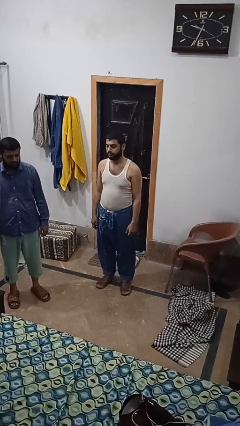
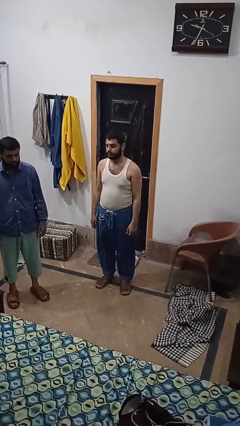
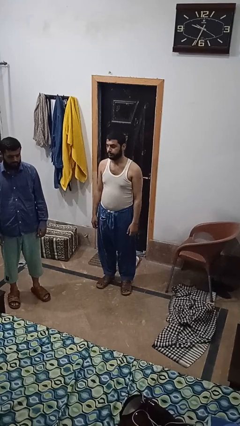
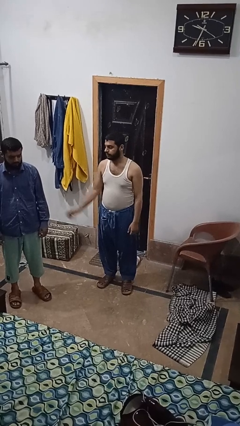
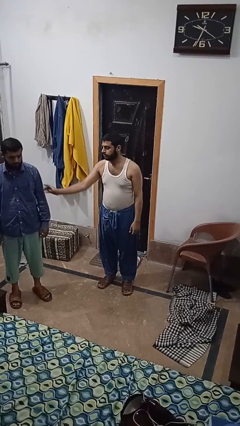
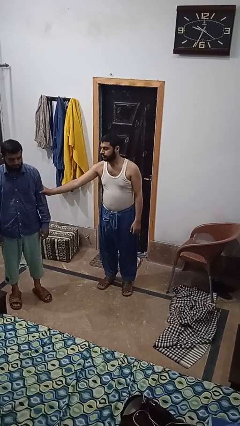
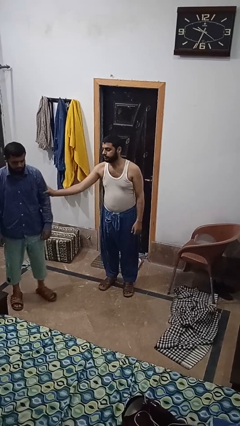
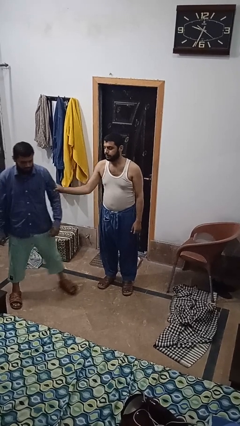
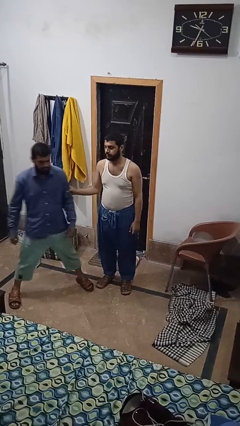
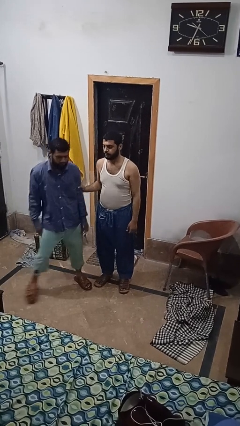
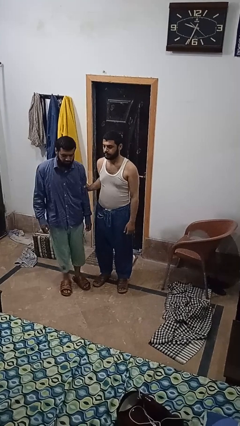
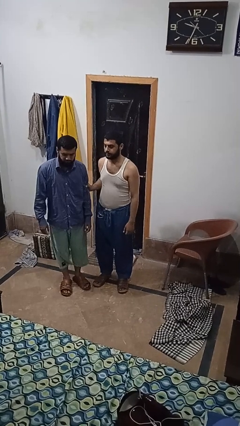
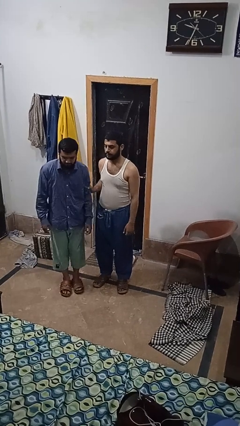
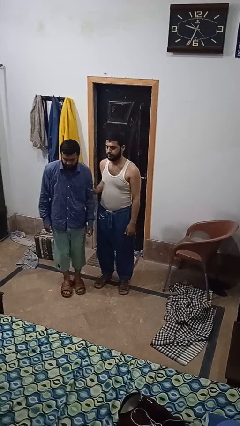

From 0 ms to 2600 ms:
person grabs person by bicep

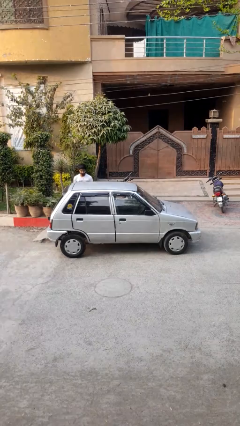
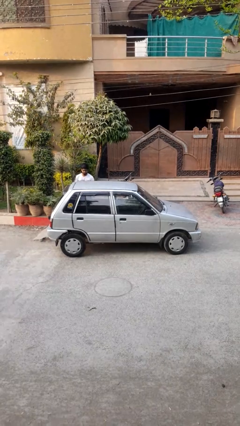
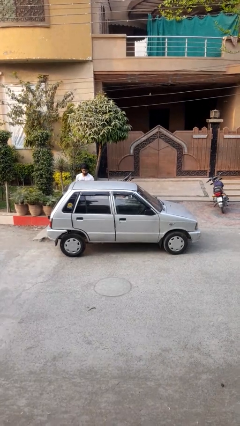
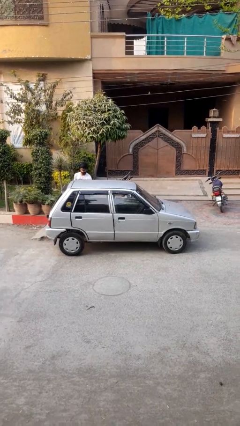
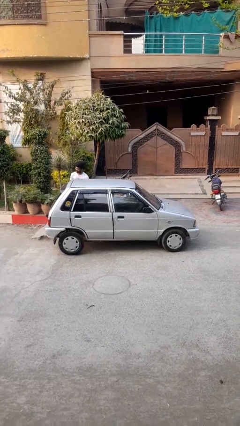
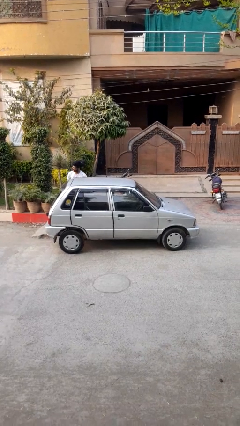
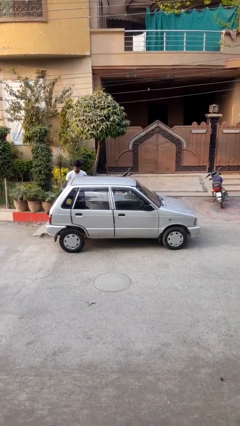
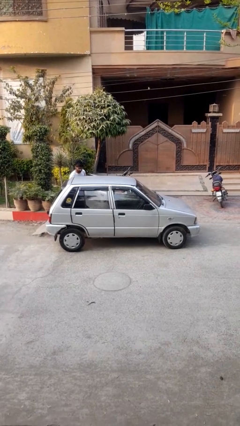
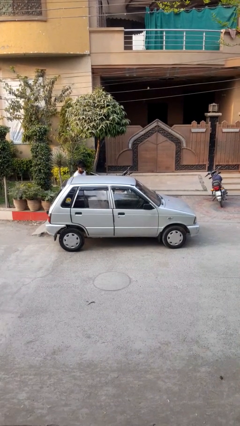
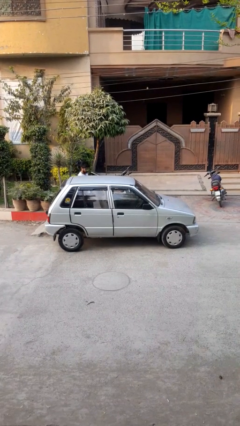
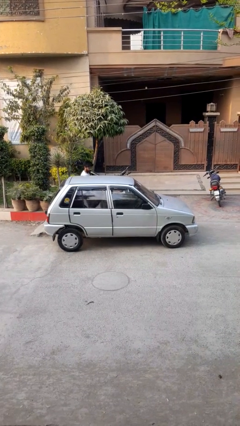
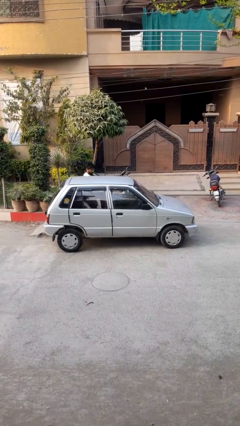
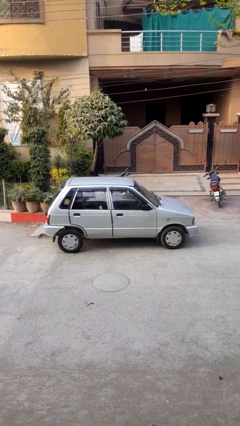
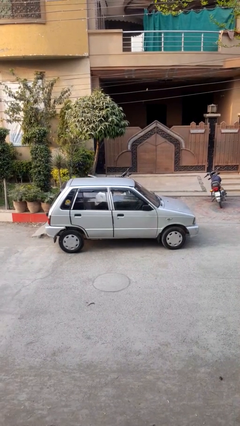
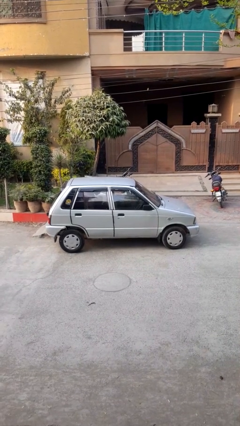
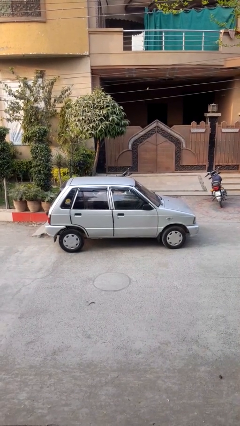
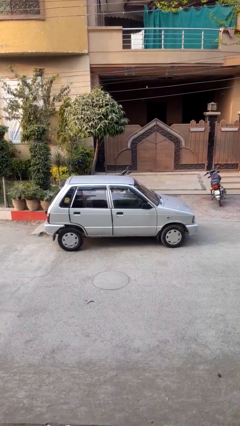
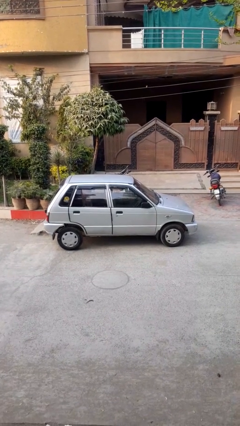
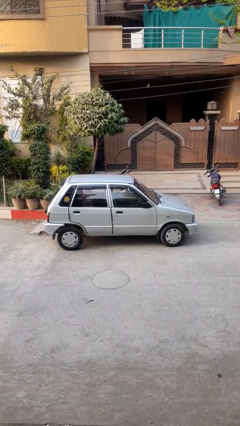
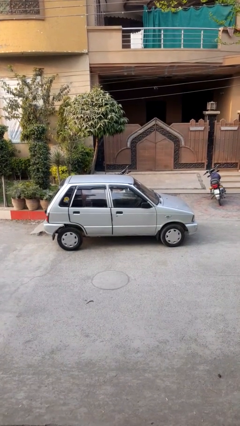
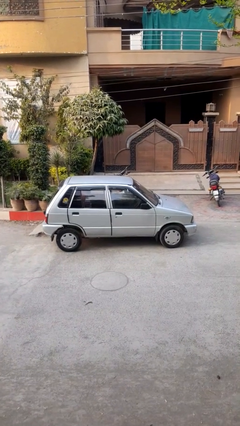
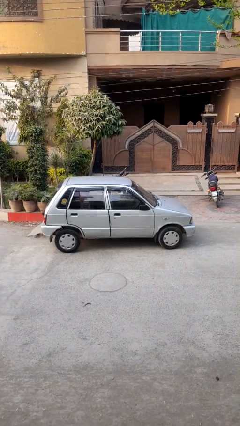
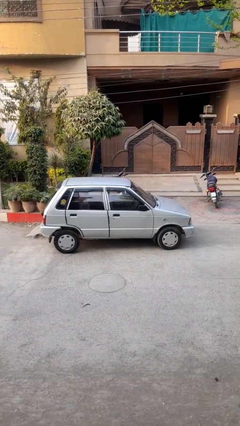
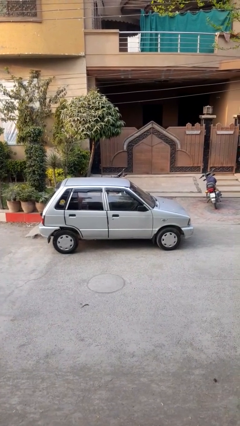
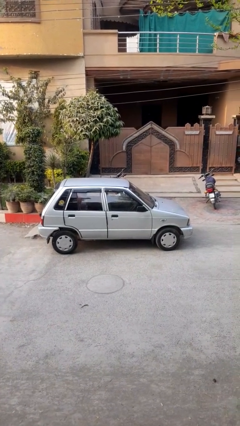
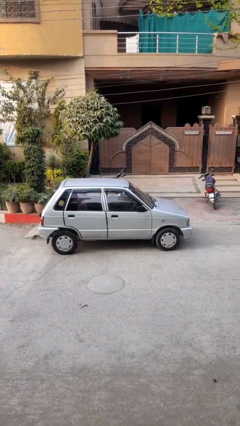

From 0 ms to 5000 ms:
car picks up person

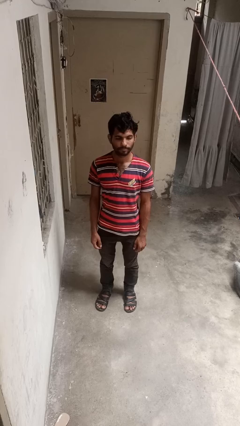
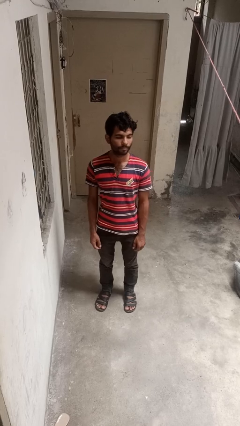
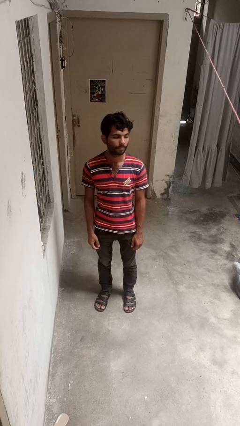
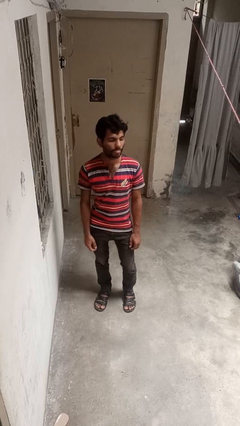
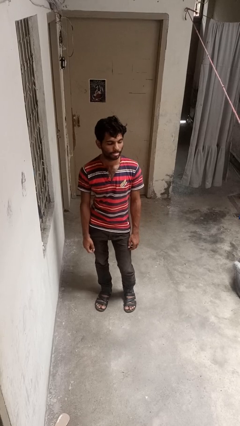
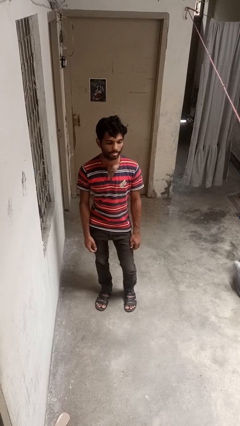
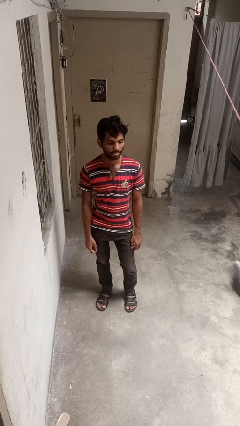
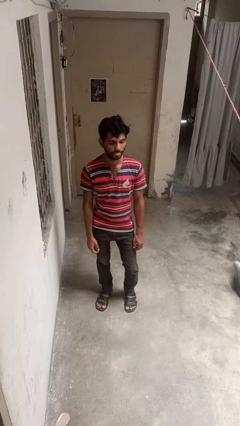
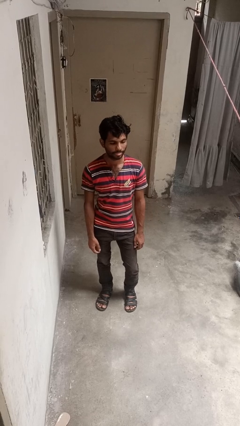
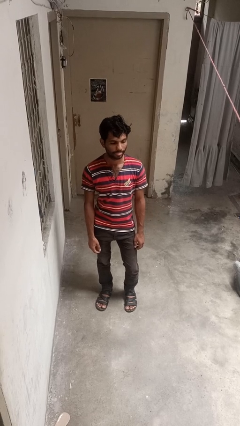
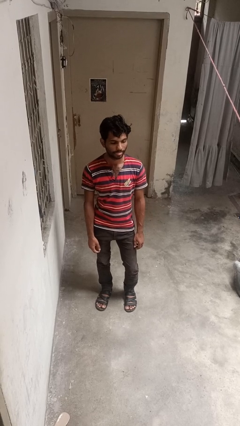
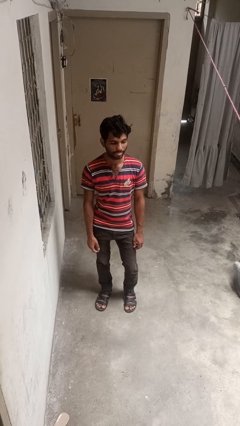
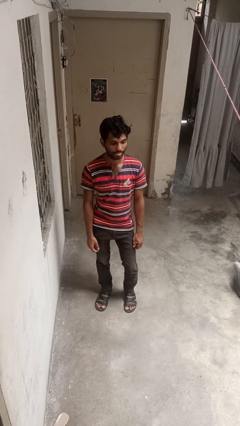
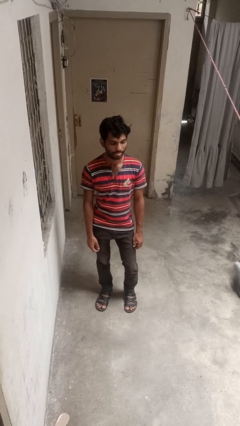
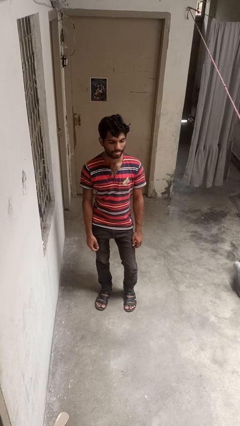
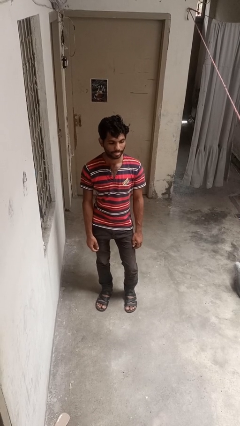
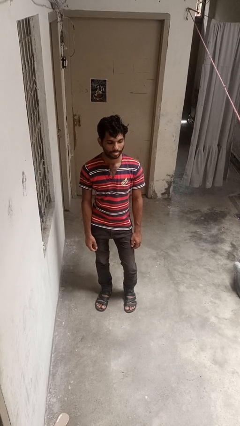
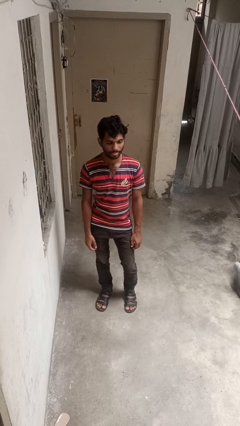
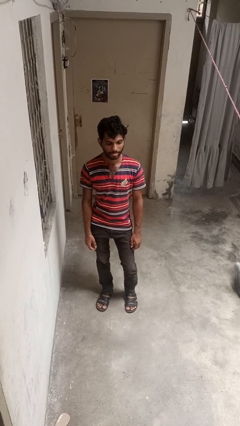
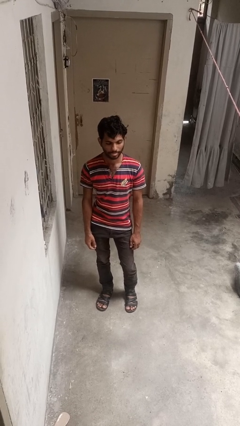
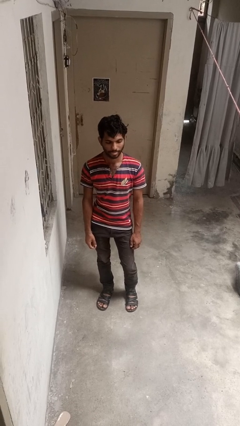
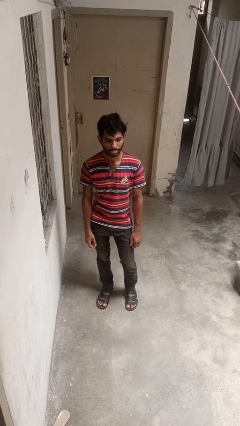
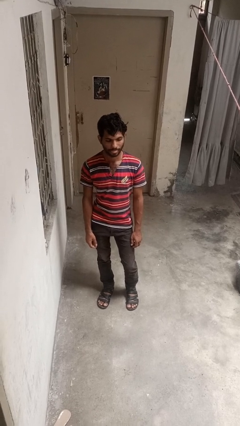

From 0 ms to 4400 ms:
person sticks out tongue

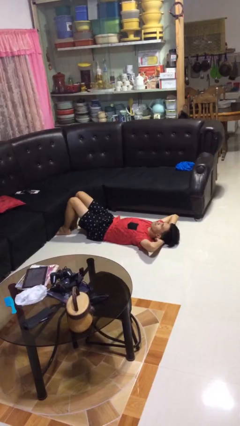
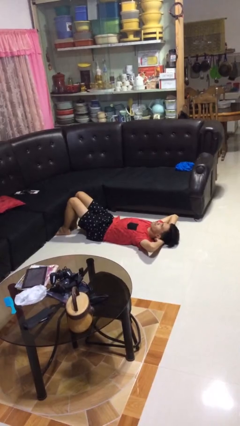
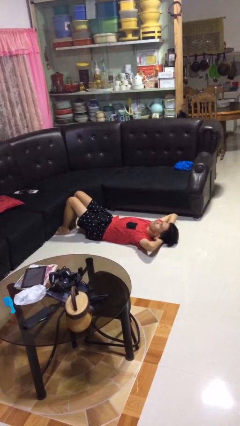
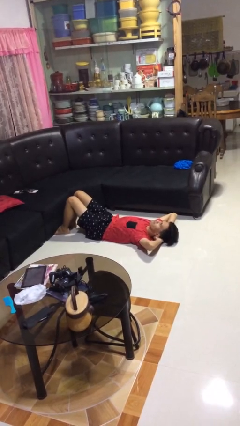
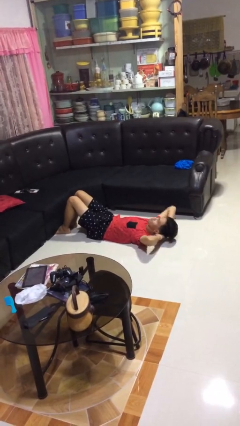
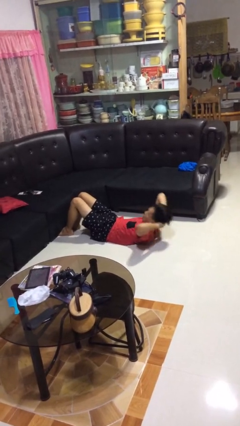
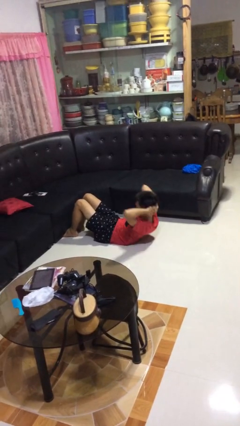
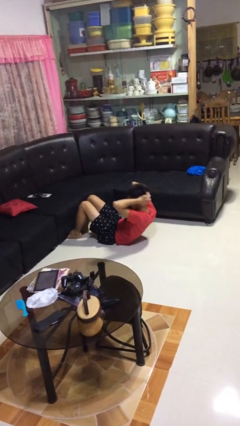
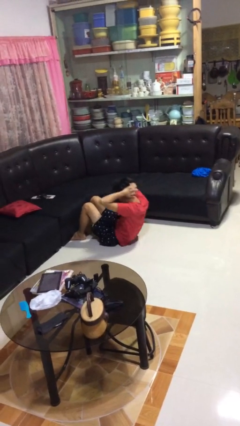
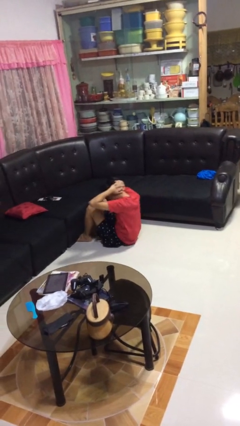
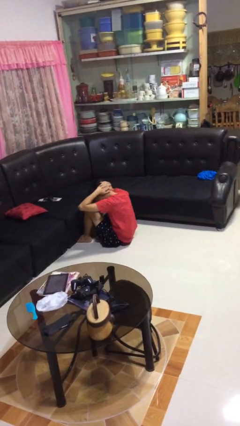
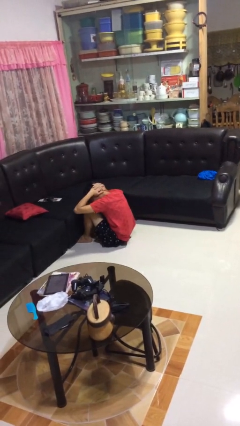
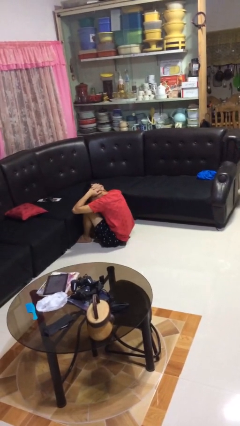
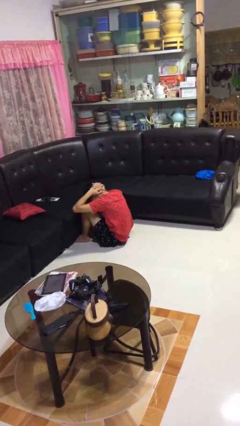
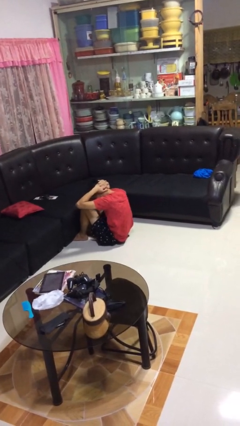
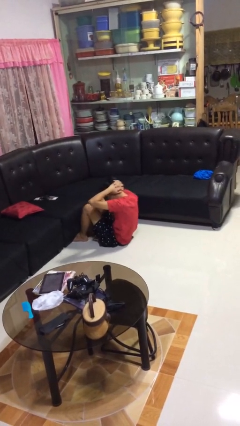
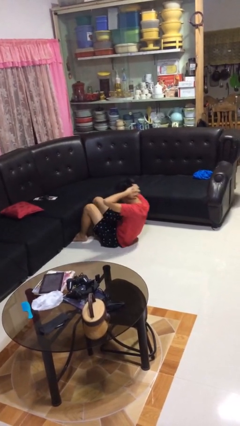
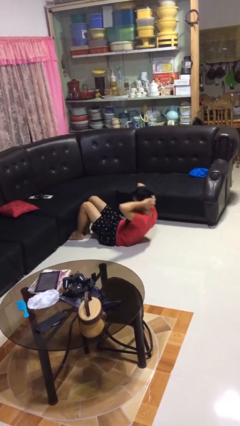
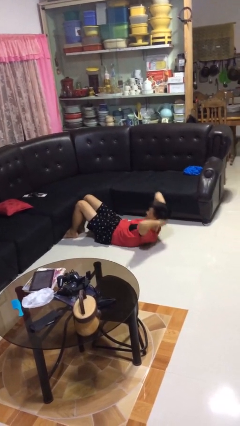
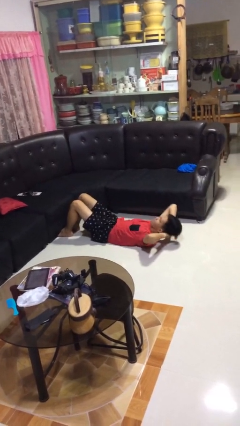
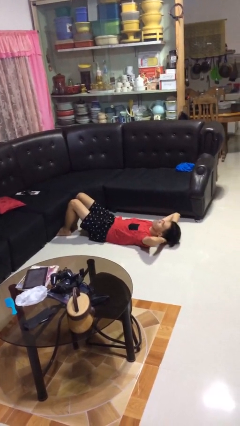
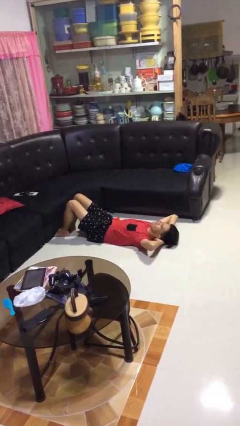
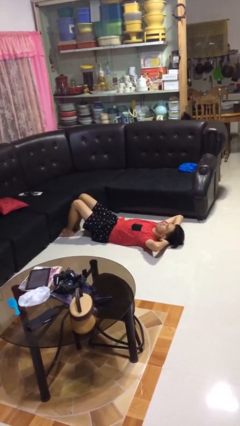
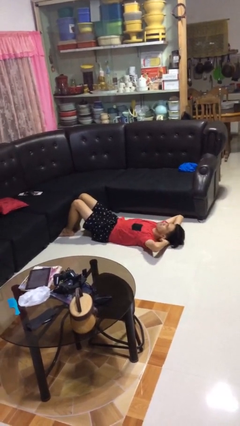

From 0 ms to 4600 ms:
person exercises with situp

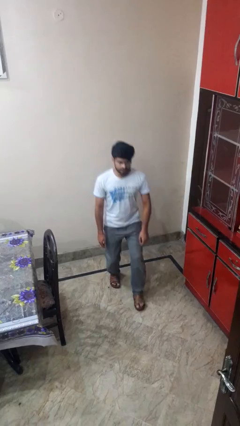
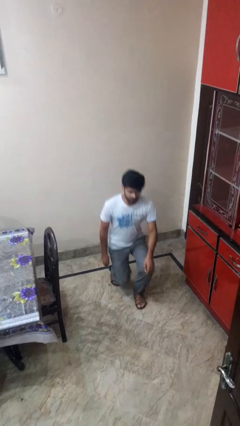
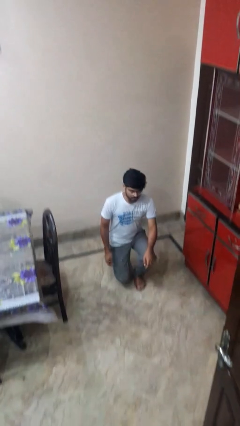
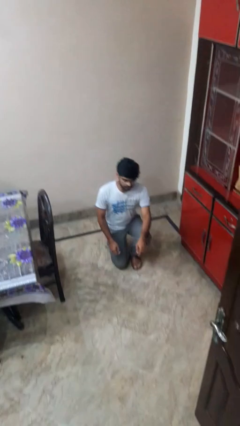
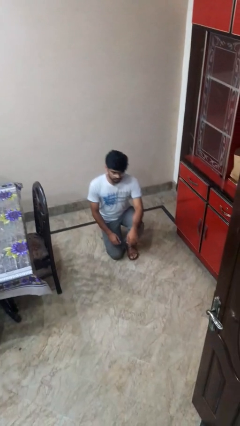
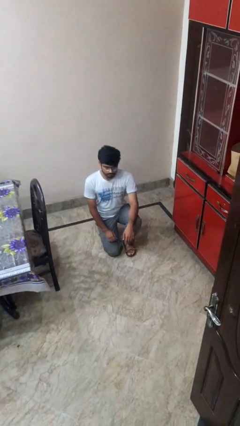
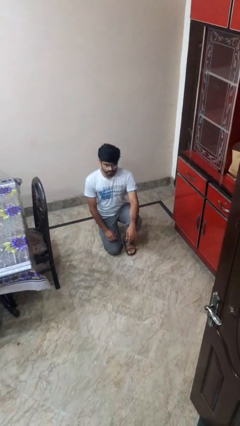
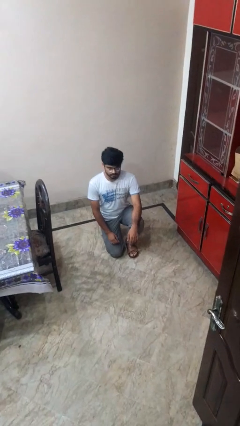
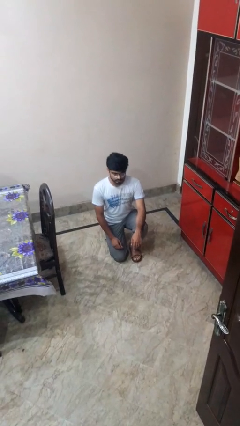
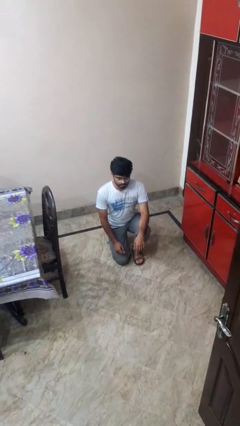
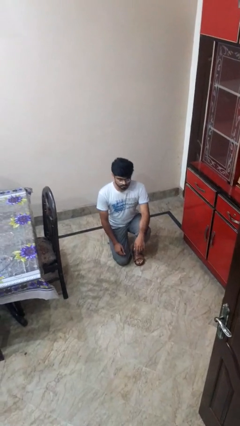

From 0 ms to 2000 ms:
person kneels
